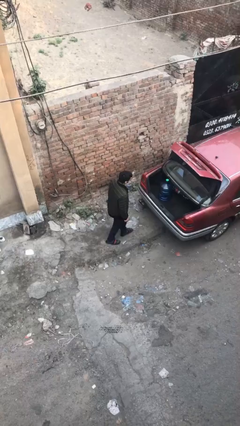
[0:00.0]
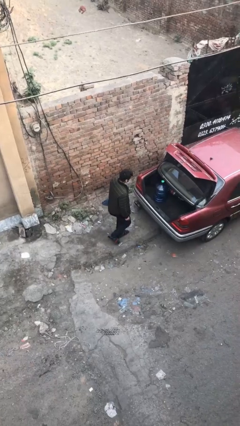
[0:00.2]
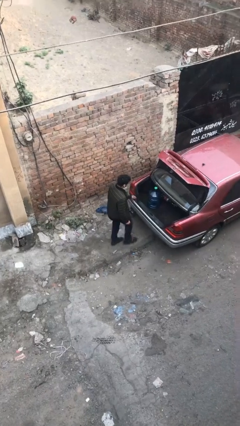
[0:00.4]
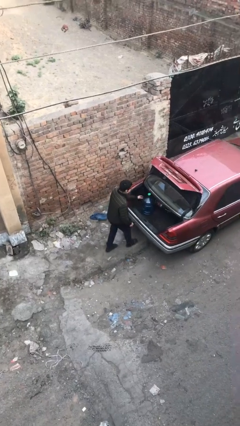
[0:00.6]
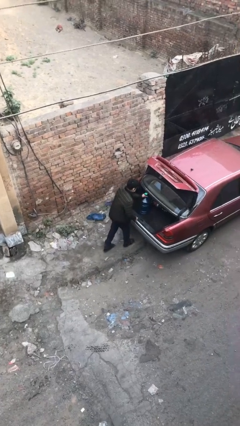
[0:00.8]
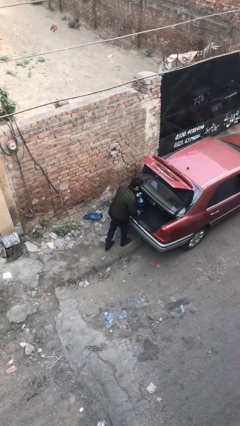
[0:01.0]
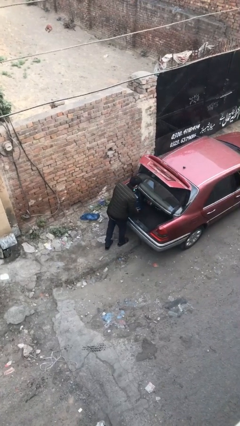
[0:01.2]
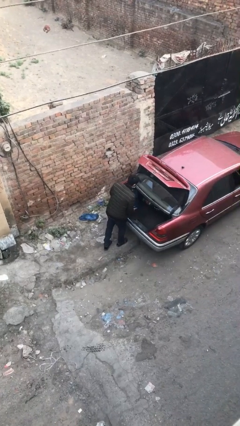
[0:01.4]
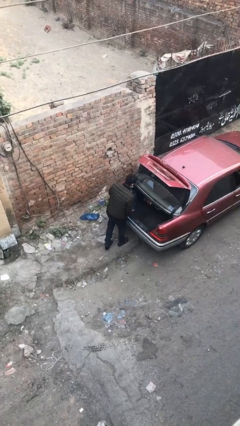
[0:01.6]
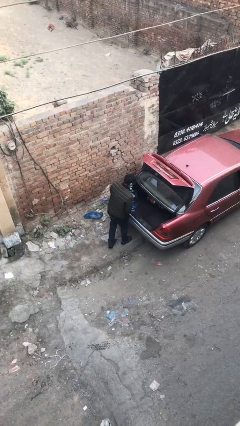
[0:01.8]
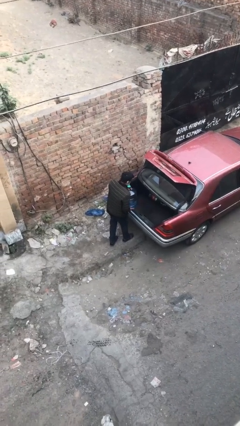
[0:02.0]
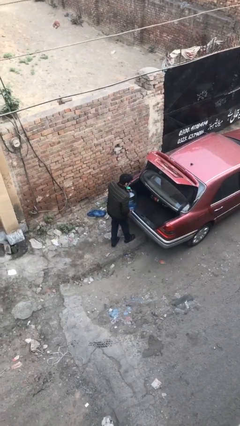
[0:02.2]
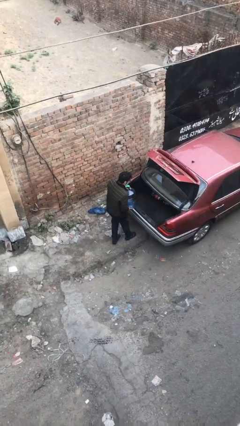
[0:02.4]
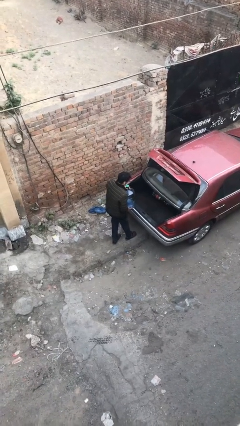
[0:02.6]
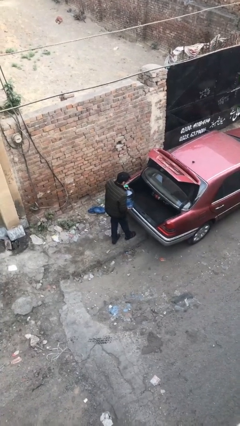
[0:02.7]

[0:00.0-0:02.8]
person unloads car

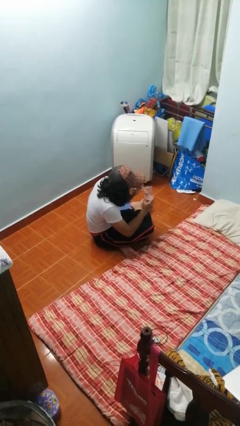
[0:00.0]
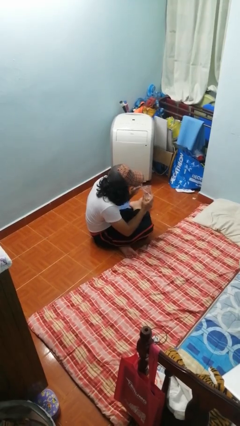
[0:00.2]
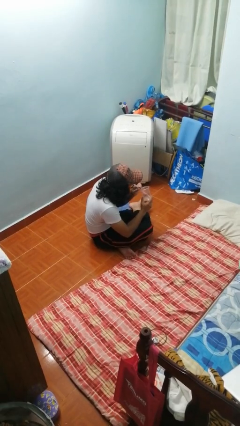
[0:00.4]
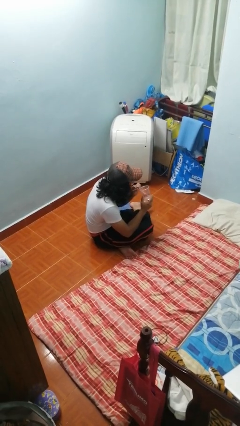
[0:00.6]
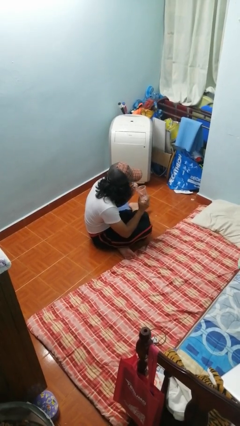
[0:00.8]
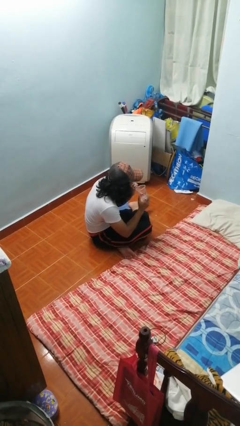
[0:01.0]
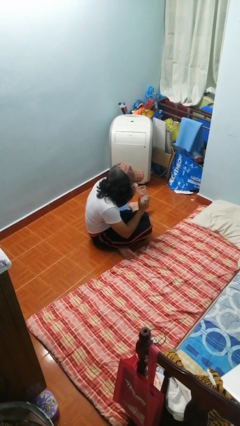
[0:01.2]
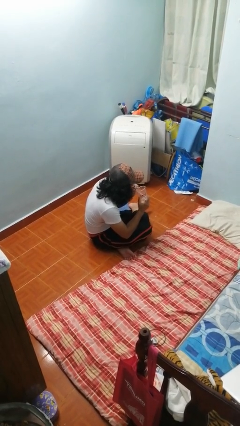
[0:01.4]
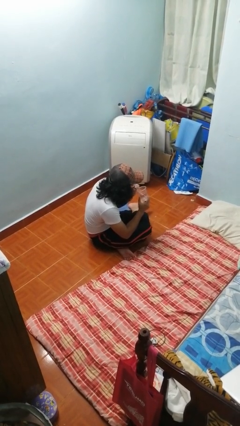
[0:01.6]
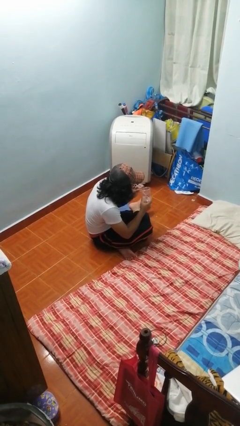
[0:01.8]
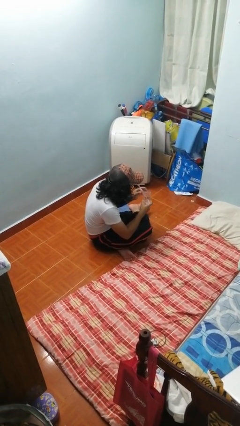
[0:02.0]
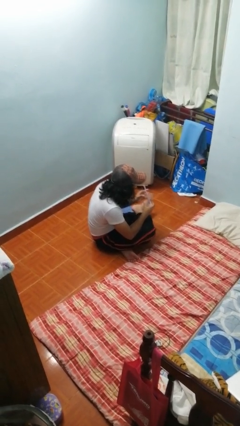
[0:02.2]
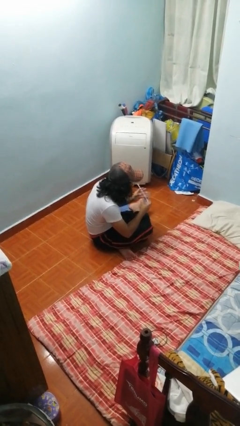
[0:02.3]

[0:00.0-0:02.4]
person drinks from straw

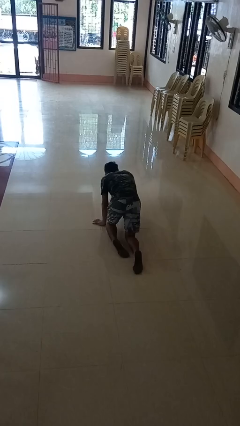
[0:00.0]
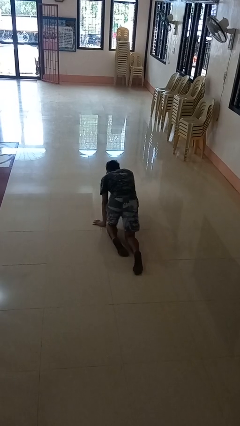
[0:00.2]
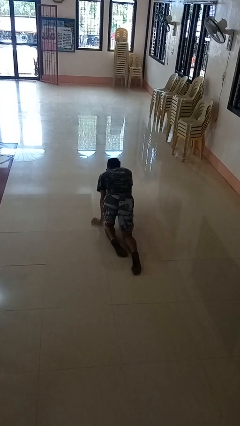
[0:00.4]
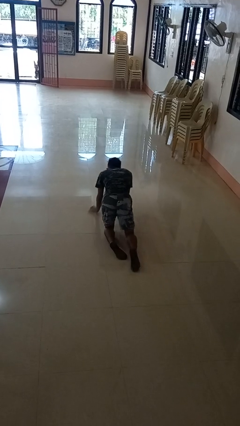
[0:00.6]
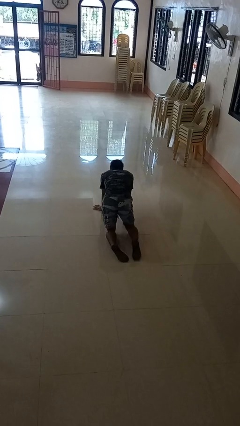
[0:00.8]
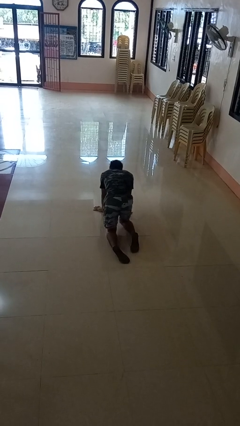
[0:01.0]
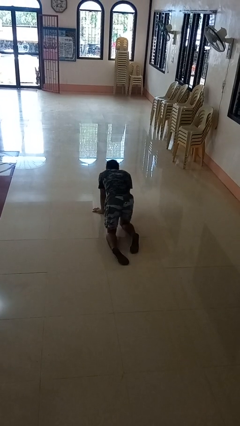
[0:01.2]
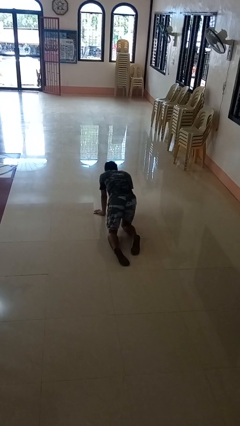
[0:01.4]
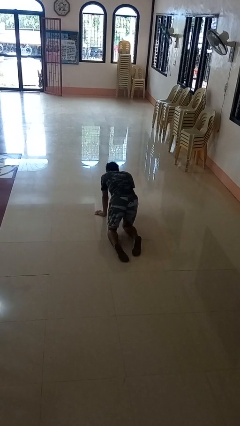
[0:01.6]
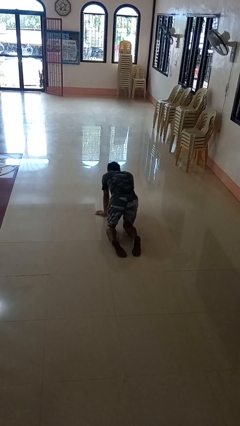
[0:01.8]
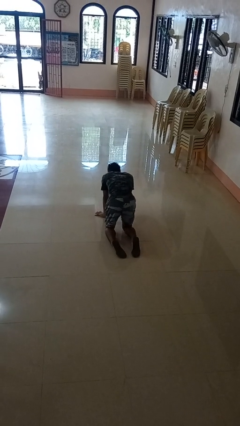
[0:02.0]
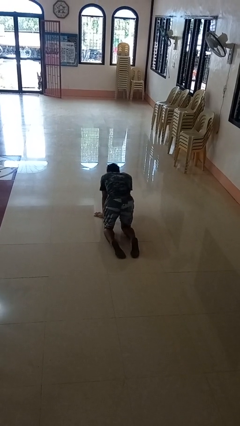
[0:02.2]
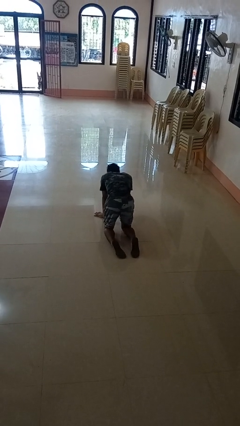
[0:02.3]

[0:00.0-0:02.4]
person crawls

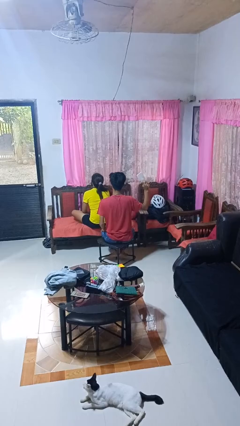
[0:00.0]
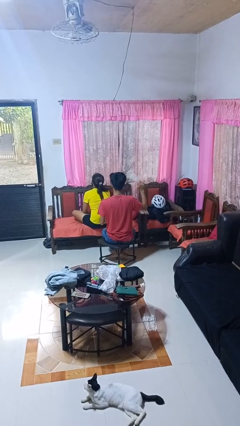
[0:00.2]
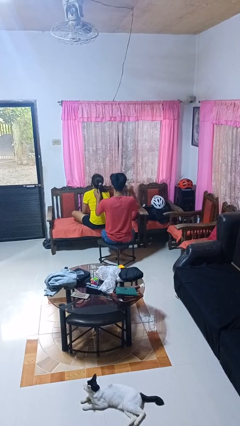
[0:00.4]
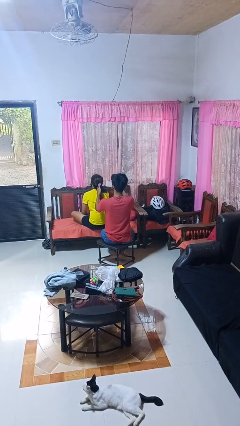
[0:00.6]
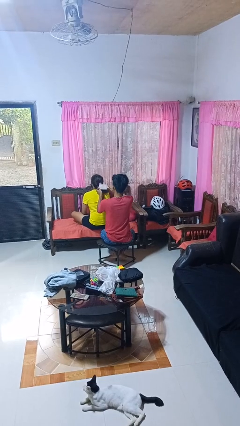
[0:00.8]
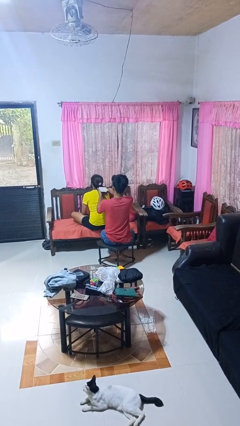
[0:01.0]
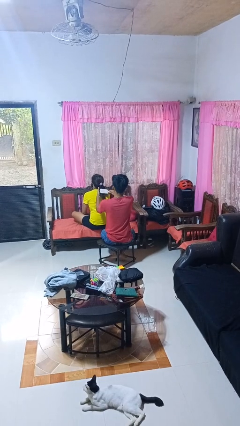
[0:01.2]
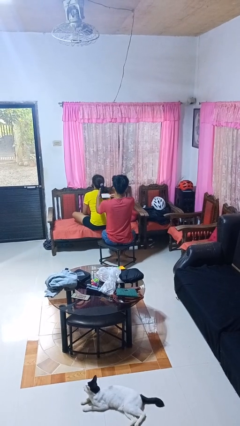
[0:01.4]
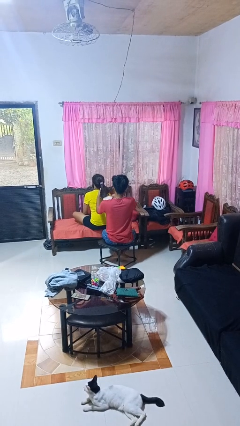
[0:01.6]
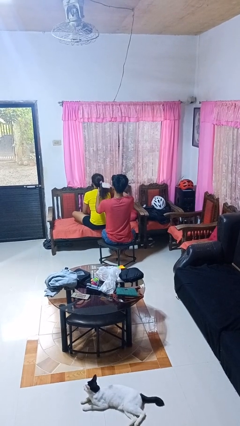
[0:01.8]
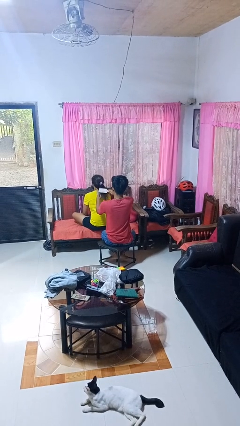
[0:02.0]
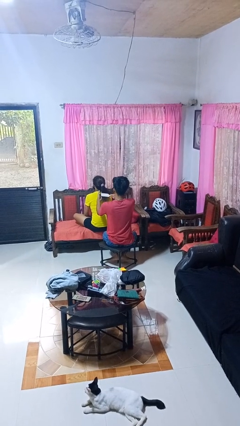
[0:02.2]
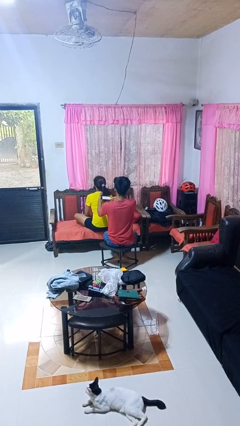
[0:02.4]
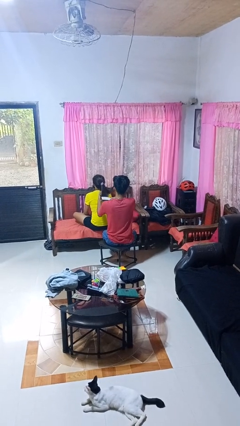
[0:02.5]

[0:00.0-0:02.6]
person brushes hair of person

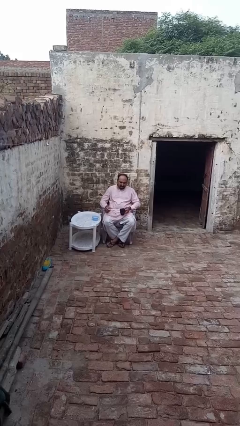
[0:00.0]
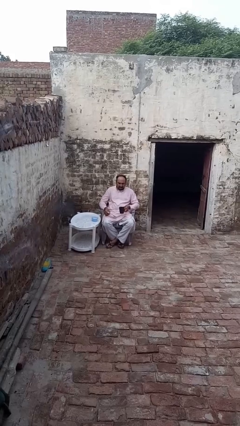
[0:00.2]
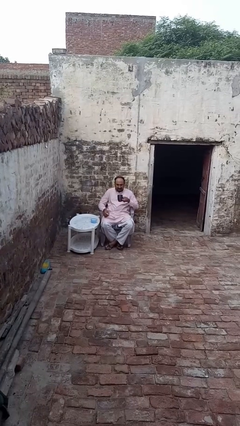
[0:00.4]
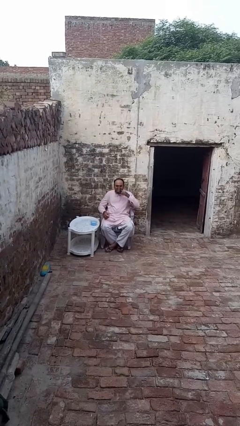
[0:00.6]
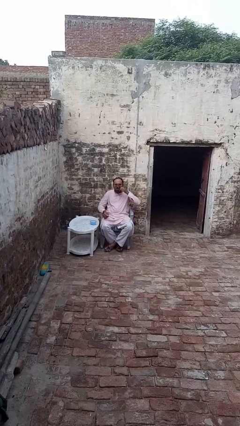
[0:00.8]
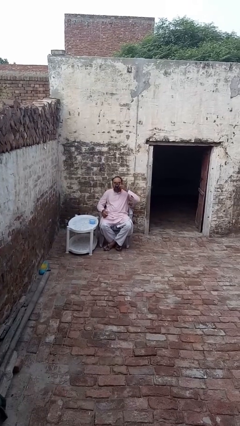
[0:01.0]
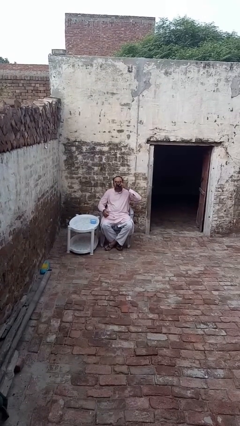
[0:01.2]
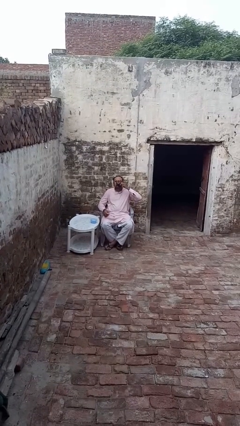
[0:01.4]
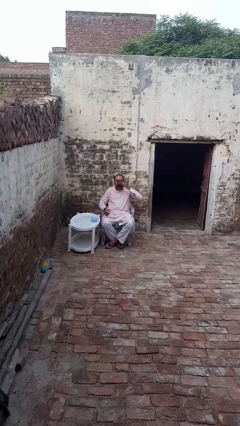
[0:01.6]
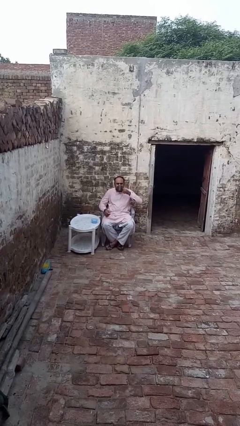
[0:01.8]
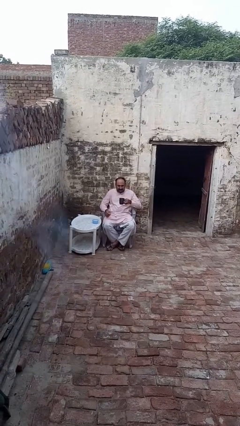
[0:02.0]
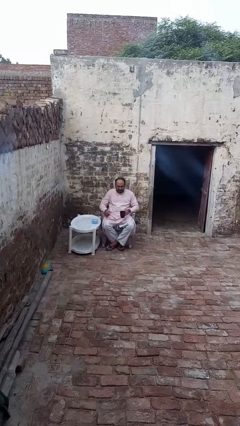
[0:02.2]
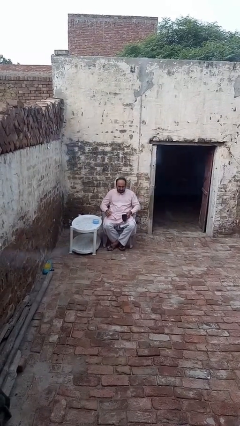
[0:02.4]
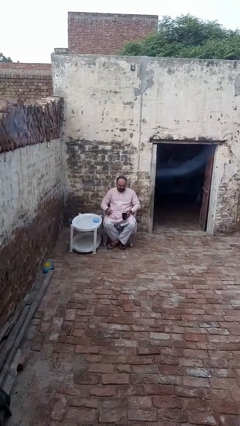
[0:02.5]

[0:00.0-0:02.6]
person drinks from mug

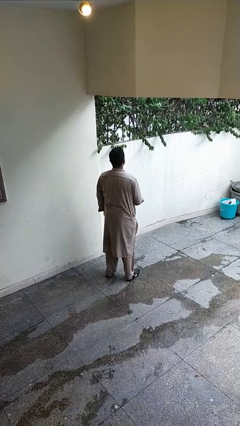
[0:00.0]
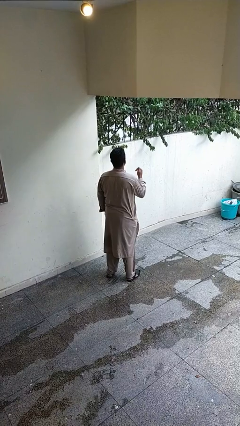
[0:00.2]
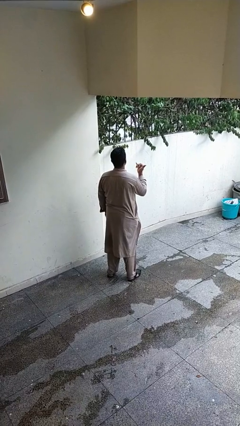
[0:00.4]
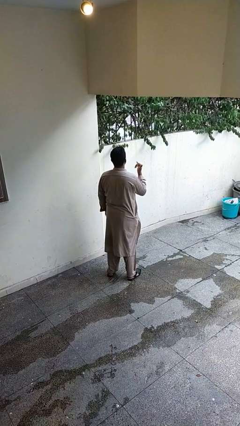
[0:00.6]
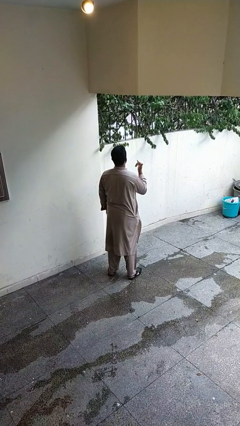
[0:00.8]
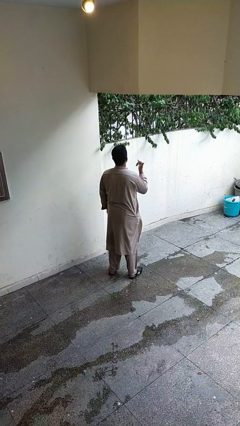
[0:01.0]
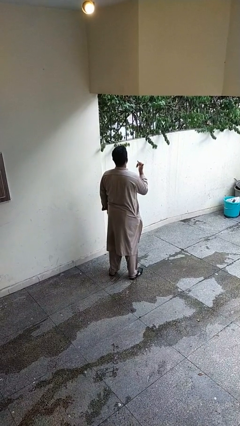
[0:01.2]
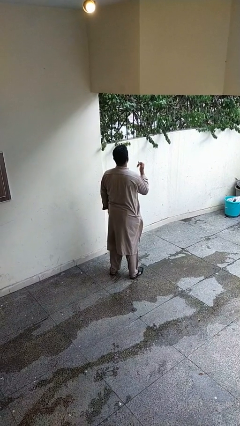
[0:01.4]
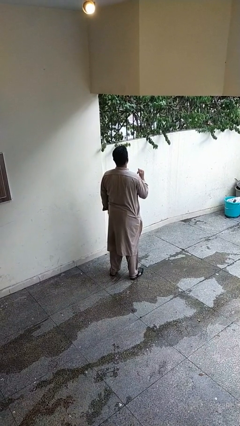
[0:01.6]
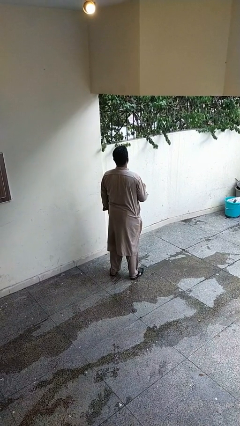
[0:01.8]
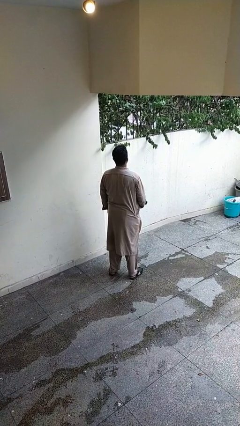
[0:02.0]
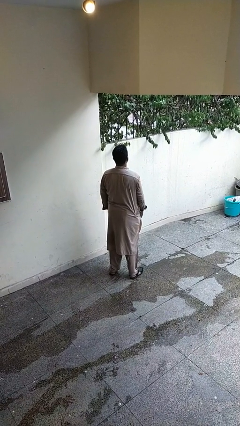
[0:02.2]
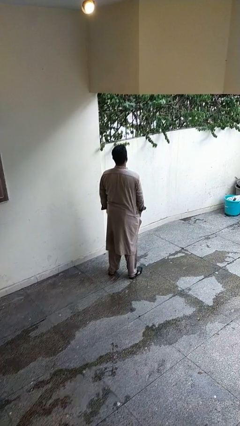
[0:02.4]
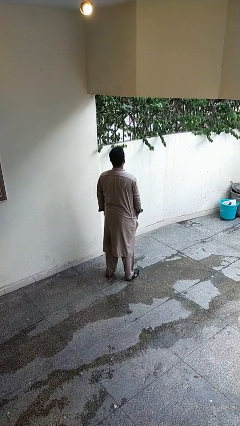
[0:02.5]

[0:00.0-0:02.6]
person gestures hang loose

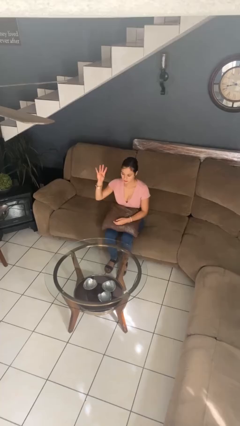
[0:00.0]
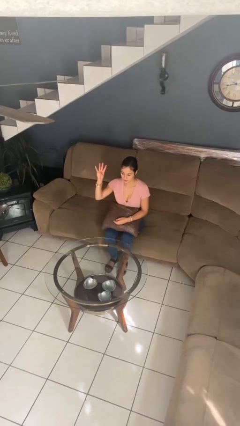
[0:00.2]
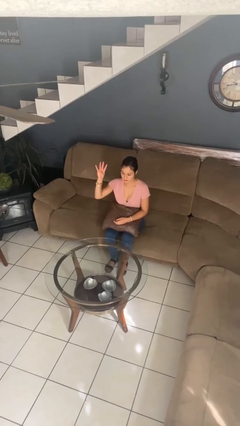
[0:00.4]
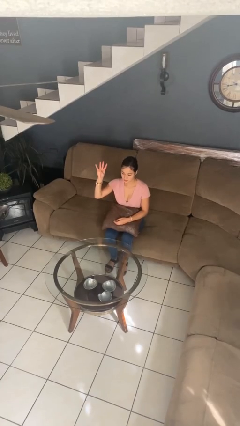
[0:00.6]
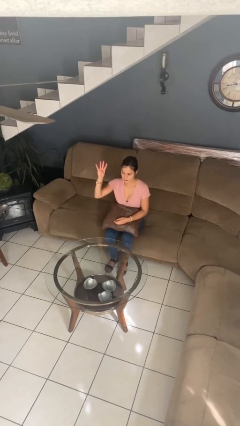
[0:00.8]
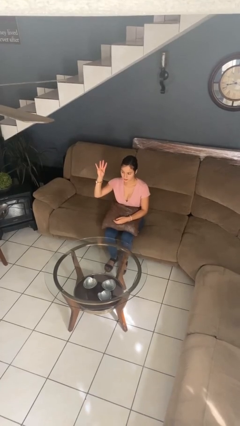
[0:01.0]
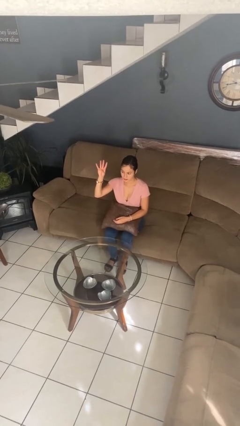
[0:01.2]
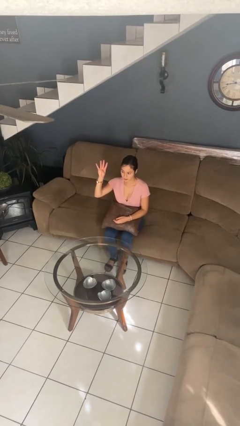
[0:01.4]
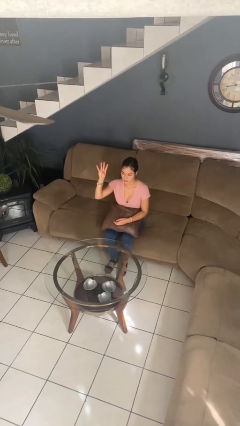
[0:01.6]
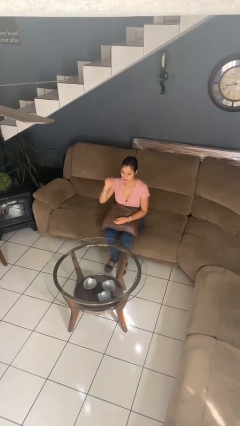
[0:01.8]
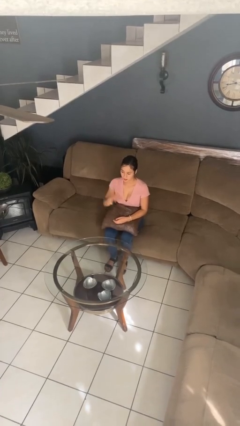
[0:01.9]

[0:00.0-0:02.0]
person gestures number four

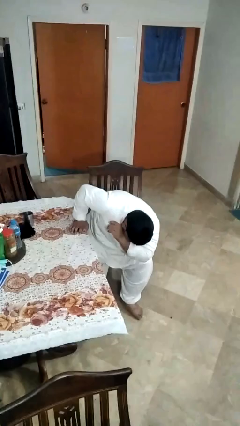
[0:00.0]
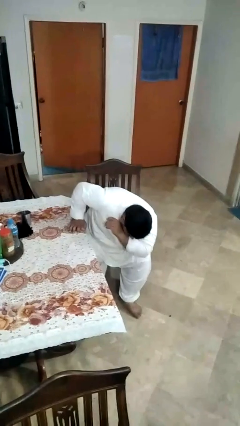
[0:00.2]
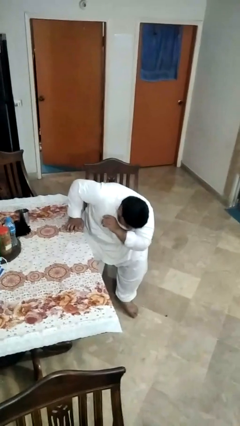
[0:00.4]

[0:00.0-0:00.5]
person sneezes into arm
